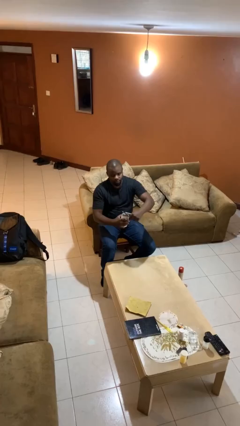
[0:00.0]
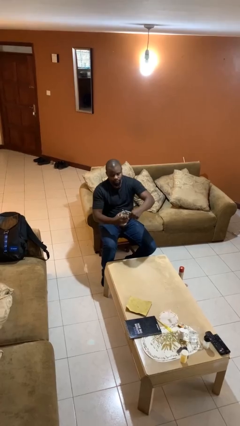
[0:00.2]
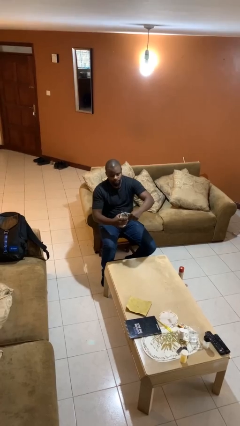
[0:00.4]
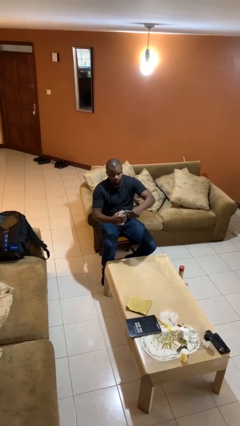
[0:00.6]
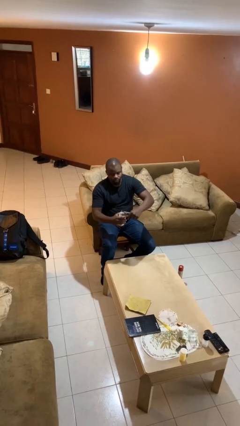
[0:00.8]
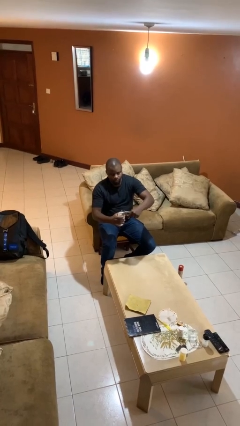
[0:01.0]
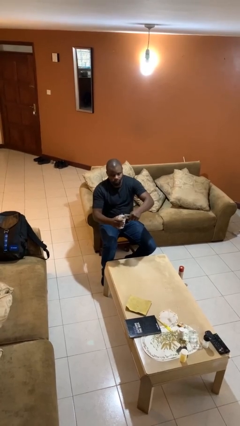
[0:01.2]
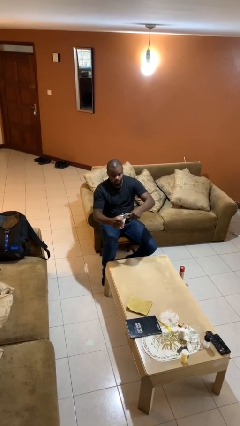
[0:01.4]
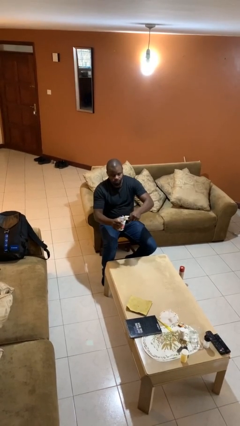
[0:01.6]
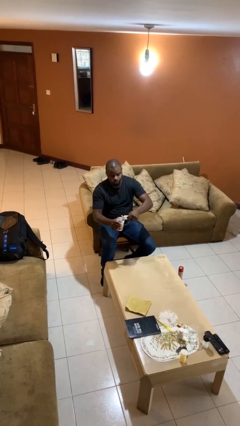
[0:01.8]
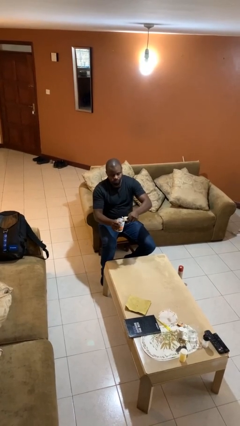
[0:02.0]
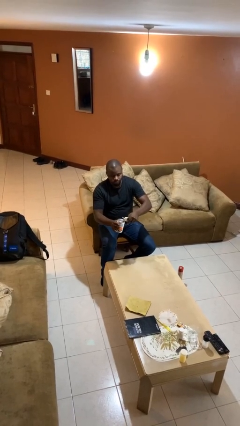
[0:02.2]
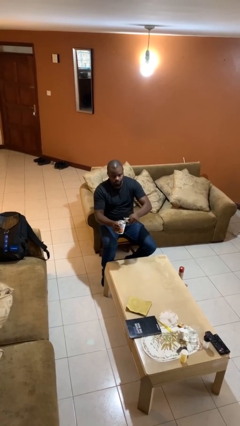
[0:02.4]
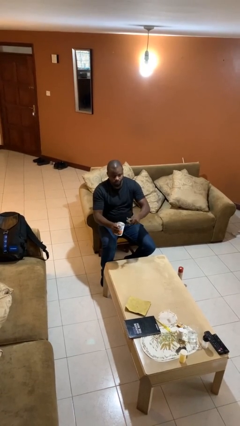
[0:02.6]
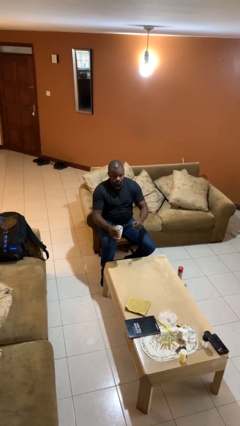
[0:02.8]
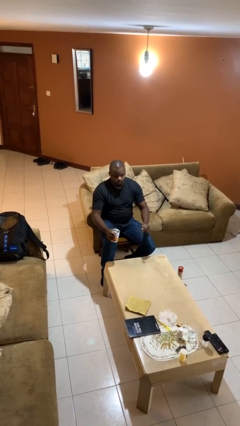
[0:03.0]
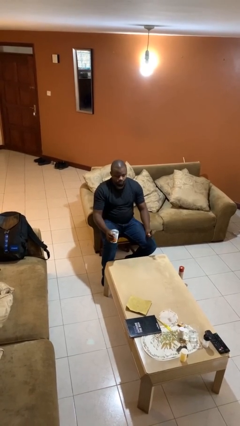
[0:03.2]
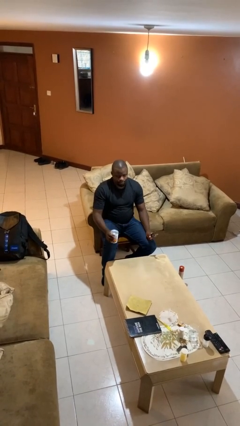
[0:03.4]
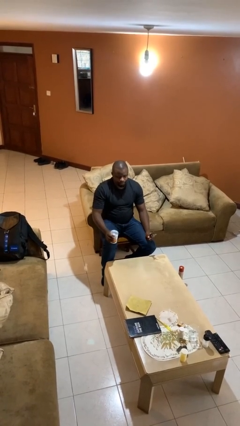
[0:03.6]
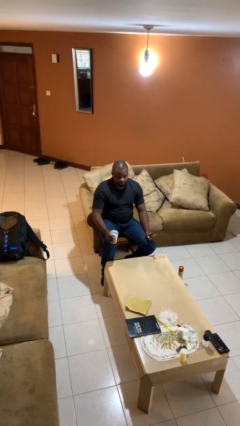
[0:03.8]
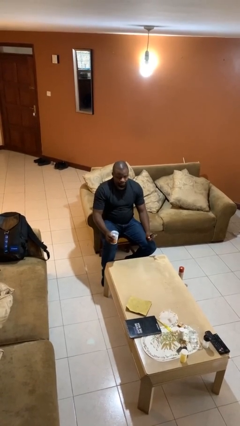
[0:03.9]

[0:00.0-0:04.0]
person opens can with can opener

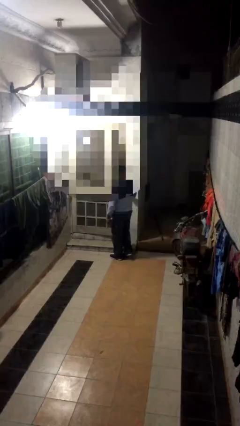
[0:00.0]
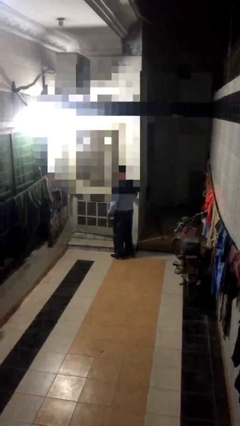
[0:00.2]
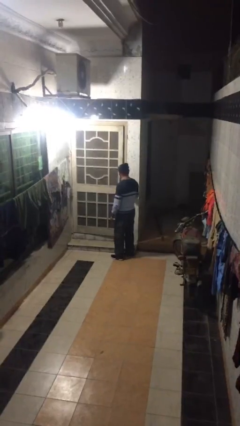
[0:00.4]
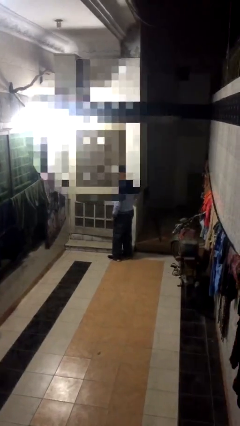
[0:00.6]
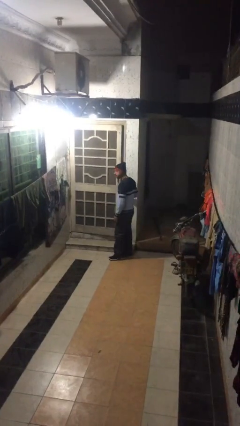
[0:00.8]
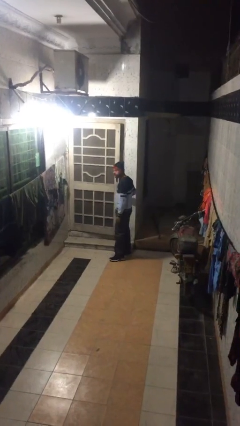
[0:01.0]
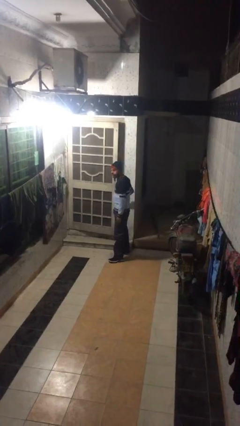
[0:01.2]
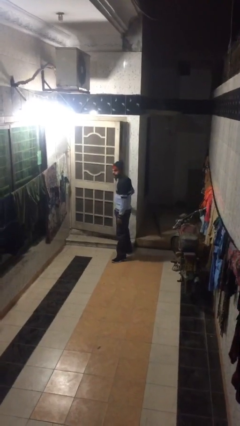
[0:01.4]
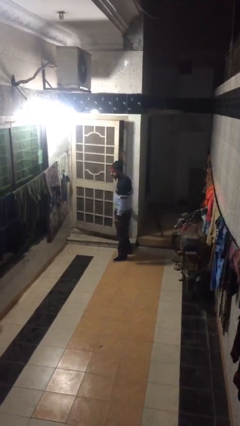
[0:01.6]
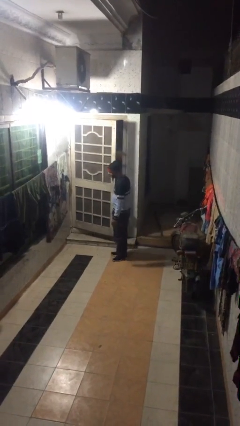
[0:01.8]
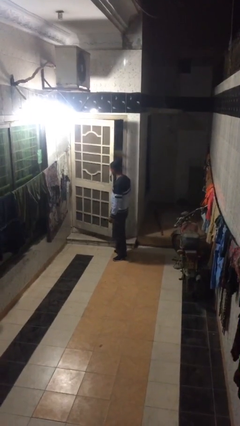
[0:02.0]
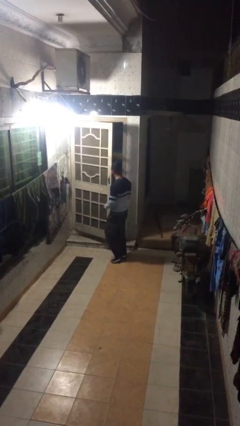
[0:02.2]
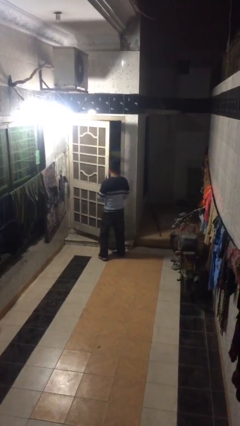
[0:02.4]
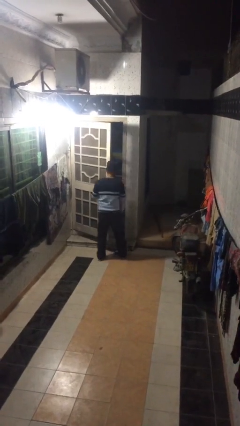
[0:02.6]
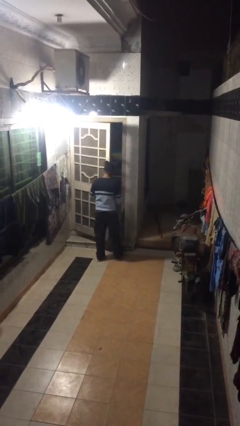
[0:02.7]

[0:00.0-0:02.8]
person opens facility door

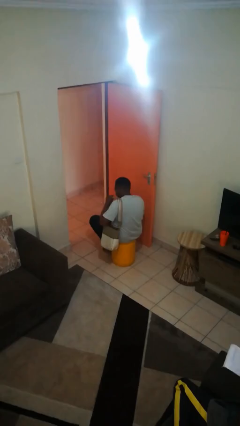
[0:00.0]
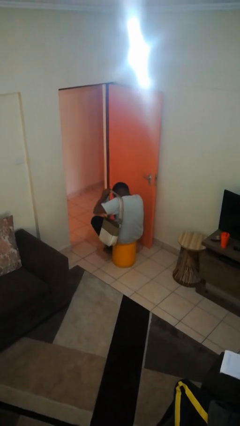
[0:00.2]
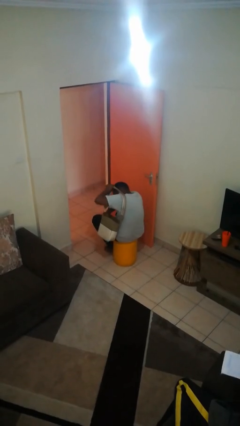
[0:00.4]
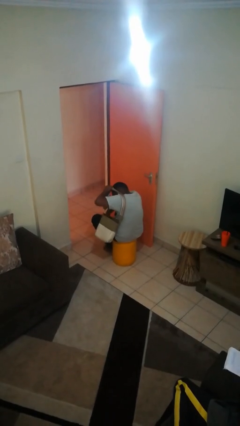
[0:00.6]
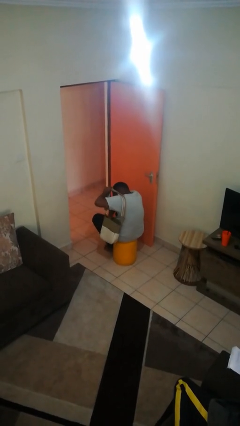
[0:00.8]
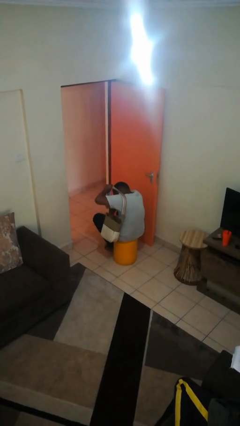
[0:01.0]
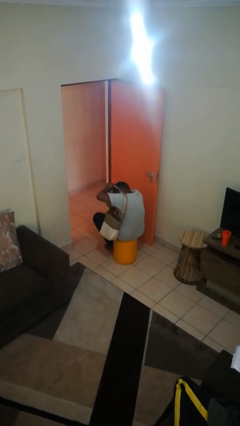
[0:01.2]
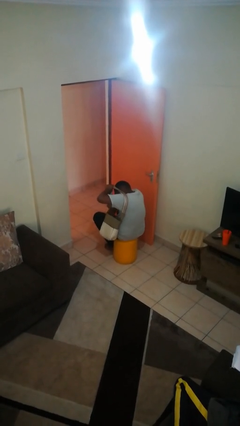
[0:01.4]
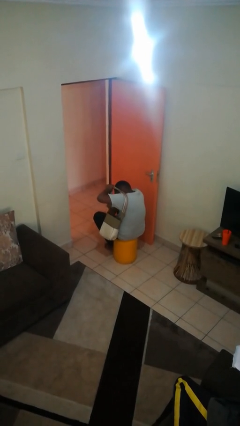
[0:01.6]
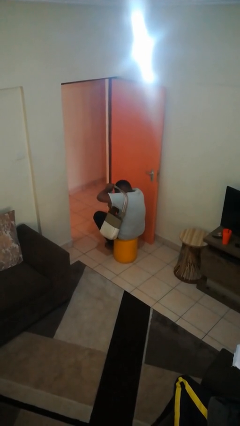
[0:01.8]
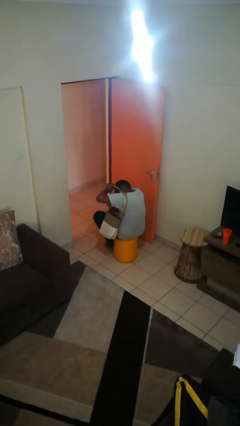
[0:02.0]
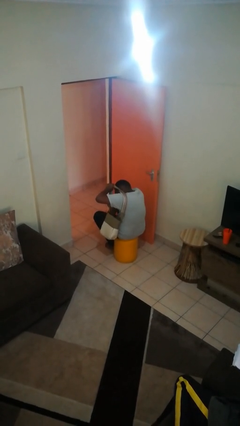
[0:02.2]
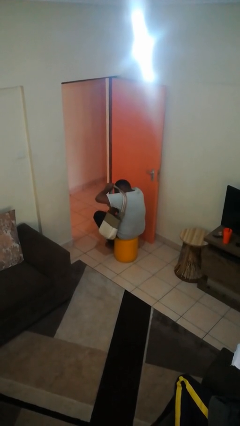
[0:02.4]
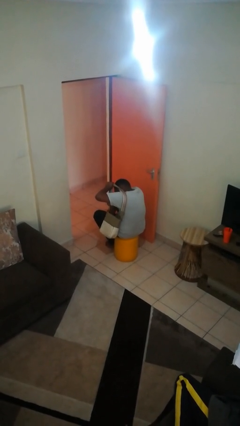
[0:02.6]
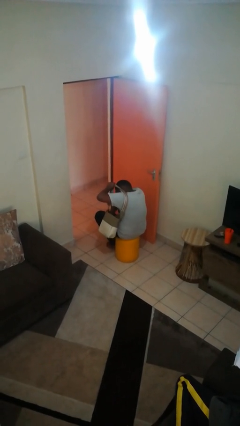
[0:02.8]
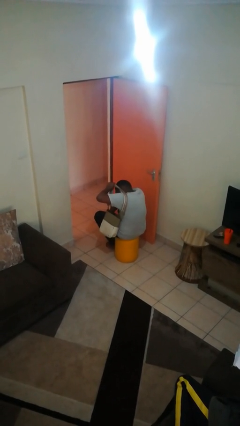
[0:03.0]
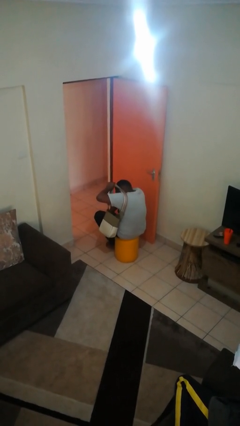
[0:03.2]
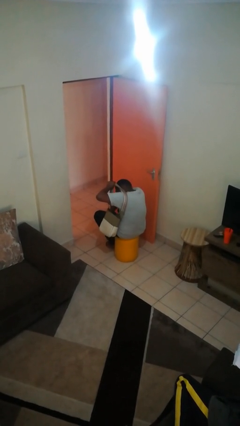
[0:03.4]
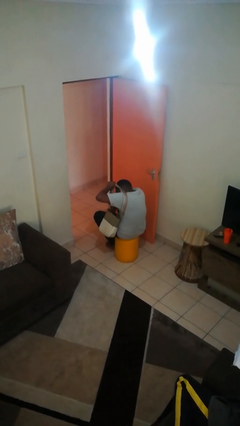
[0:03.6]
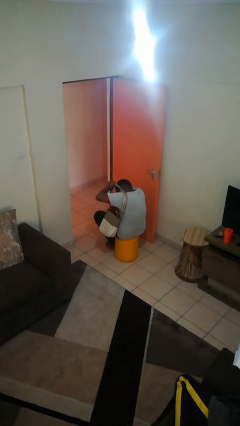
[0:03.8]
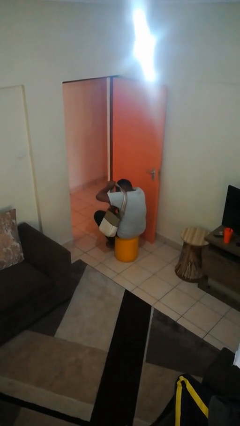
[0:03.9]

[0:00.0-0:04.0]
person searches in purse

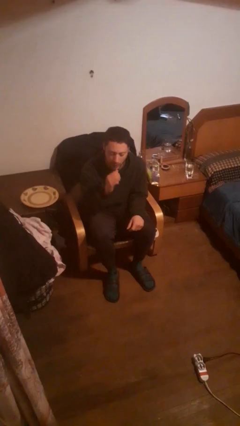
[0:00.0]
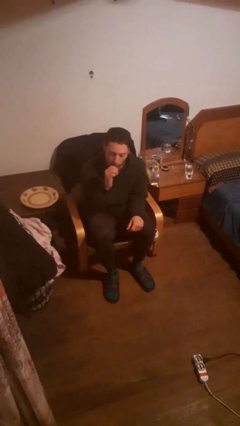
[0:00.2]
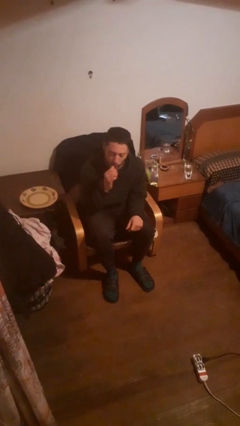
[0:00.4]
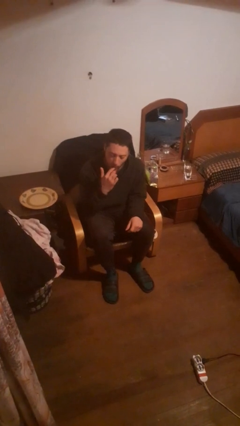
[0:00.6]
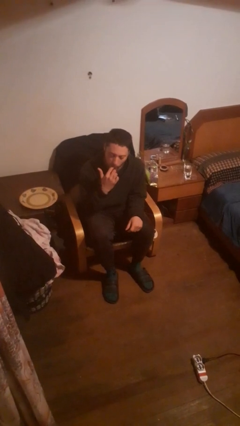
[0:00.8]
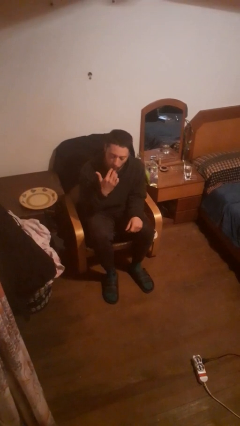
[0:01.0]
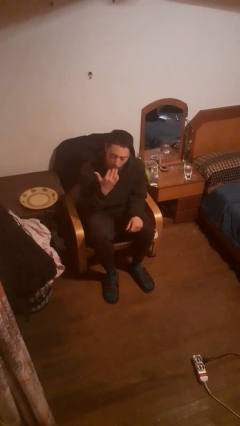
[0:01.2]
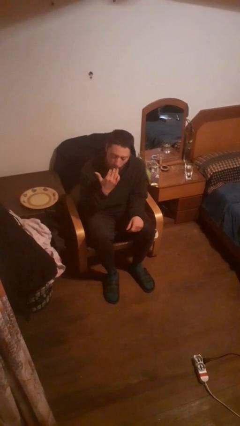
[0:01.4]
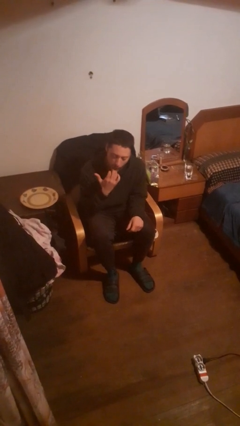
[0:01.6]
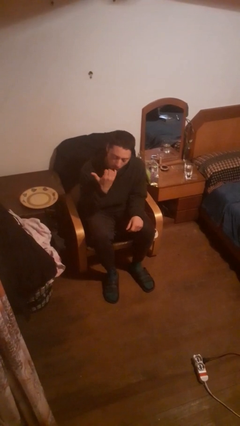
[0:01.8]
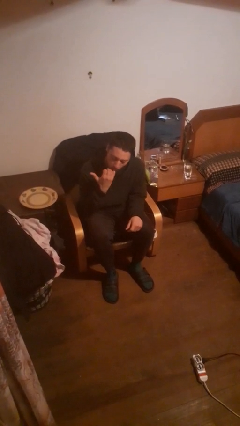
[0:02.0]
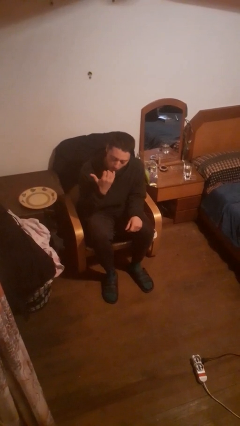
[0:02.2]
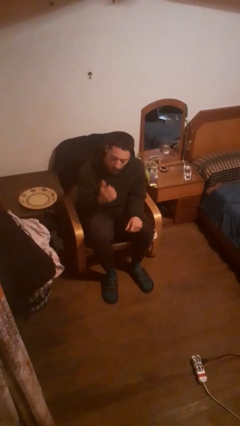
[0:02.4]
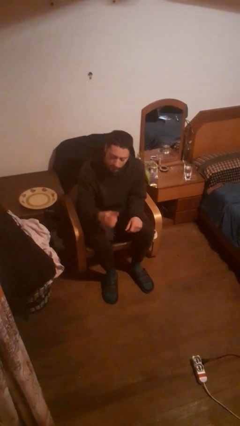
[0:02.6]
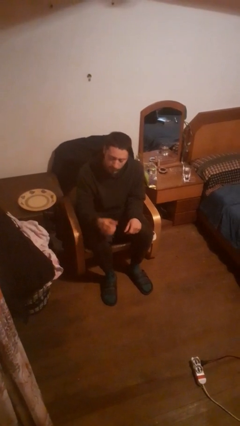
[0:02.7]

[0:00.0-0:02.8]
person licks fingers

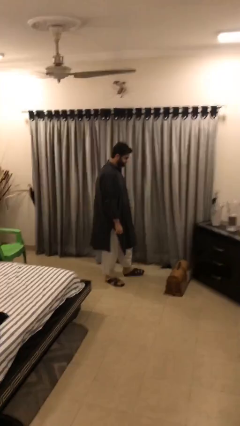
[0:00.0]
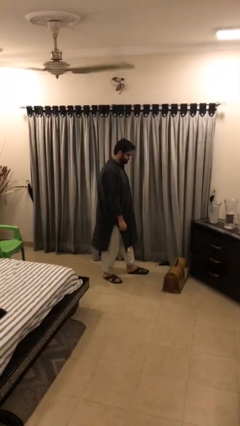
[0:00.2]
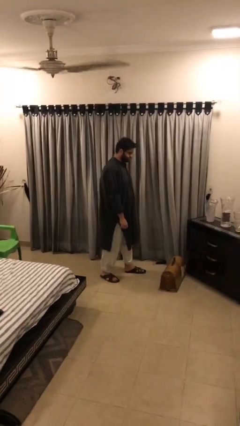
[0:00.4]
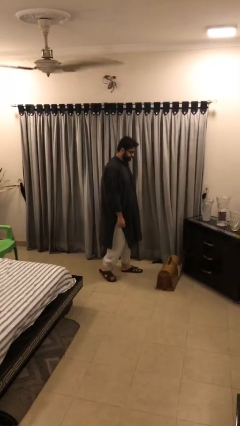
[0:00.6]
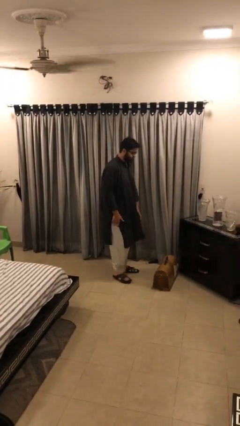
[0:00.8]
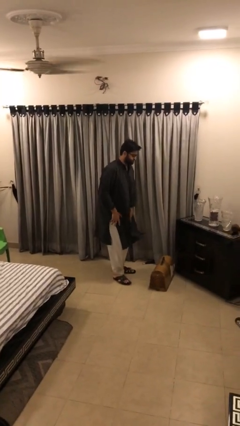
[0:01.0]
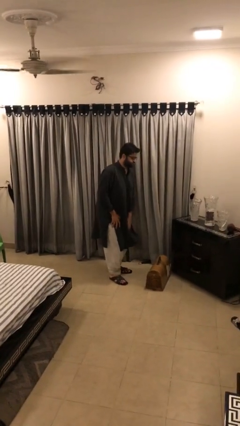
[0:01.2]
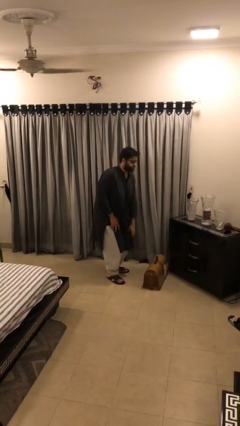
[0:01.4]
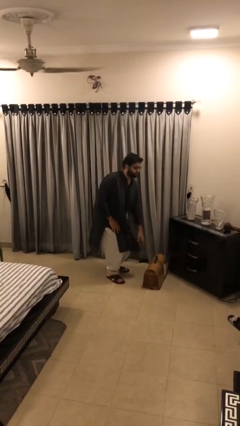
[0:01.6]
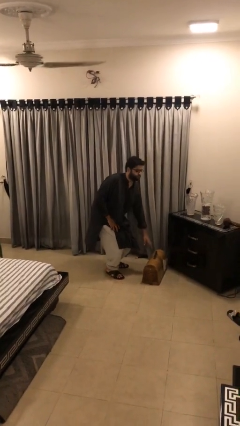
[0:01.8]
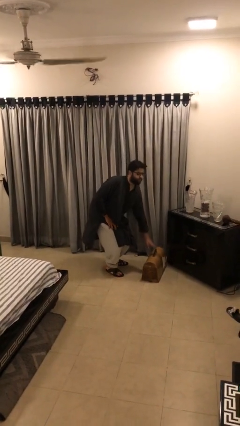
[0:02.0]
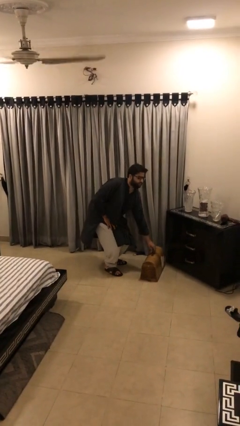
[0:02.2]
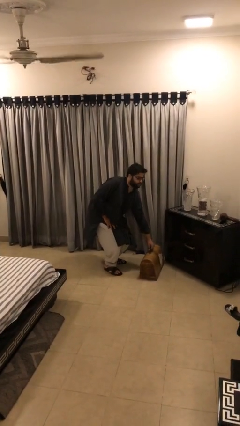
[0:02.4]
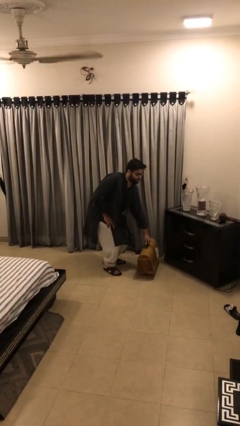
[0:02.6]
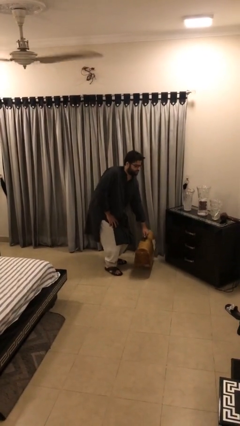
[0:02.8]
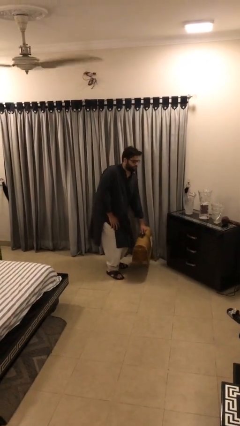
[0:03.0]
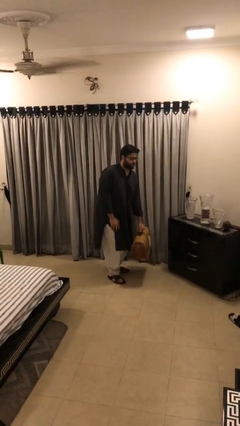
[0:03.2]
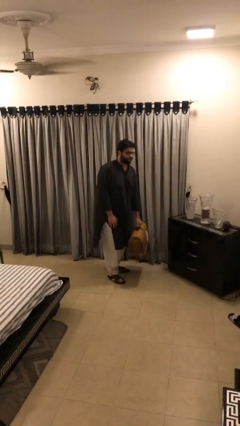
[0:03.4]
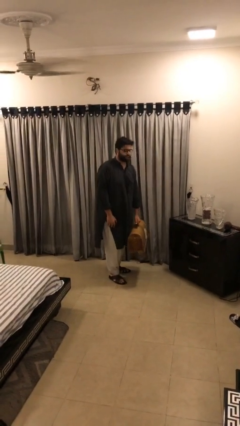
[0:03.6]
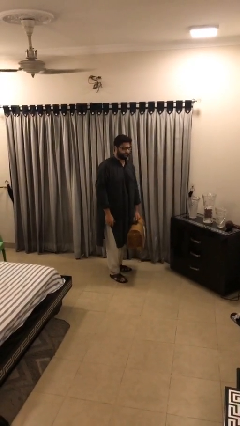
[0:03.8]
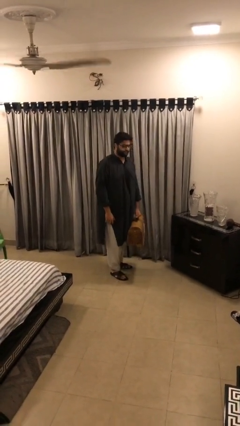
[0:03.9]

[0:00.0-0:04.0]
person picks up object from floor

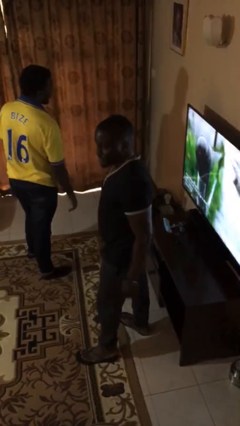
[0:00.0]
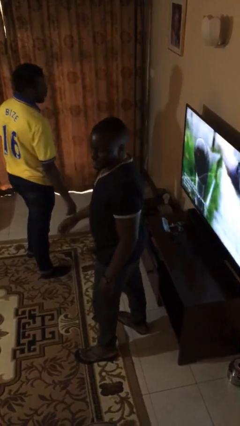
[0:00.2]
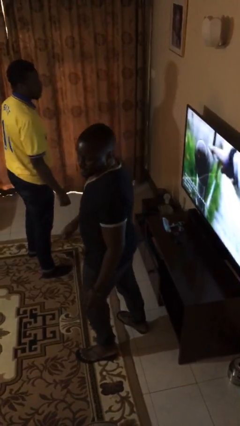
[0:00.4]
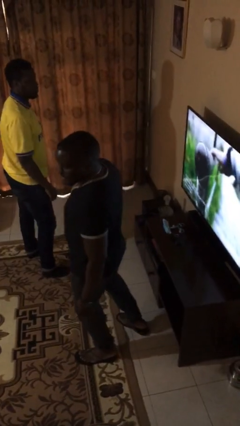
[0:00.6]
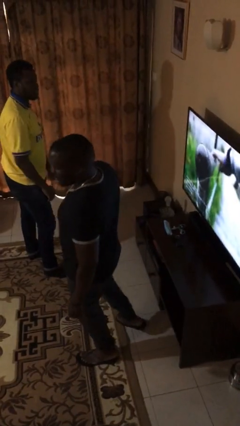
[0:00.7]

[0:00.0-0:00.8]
person bumps into person
